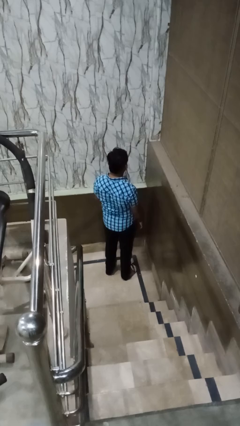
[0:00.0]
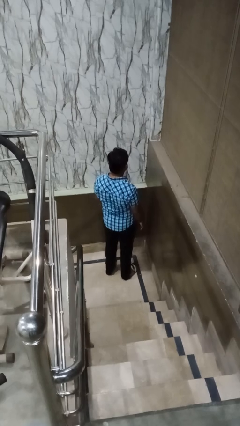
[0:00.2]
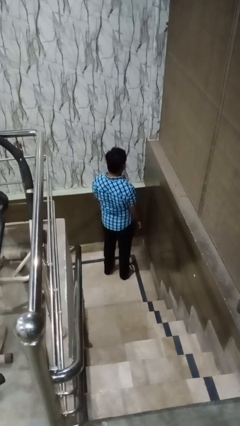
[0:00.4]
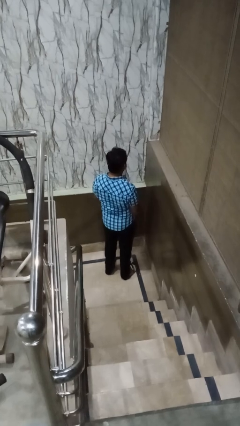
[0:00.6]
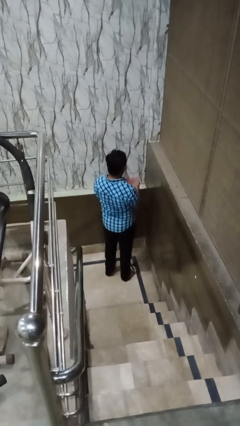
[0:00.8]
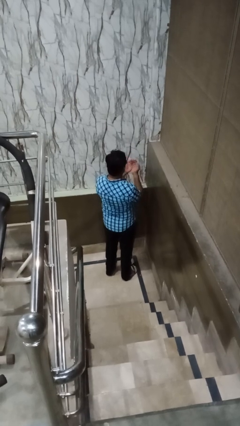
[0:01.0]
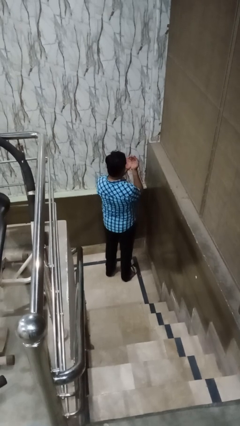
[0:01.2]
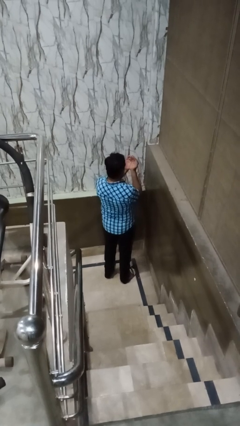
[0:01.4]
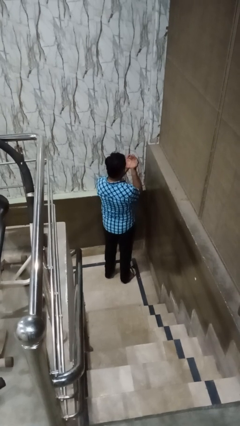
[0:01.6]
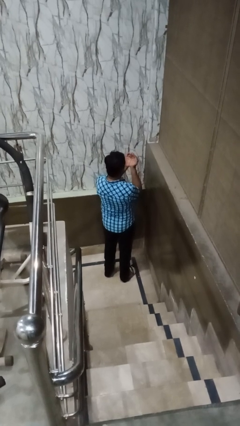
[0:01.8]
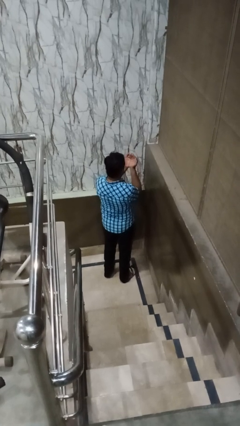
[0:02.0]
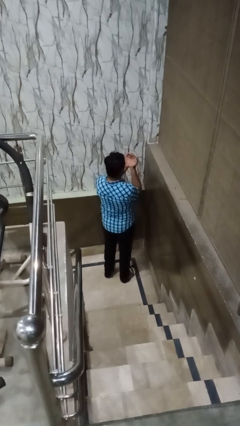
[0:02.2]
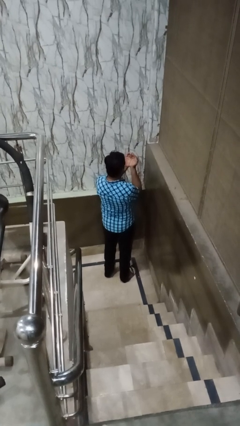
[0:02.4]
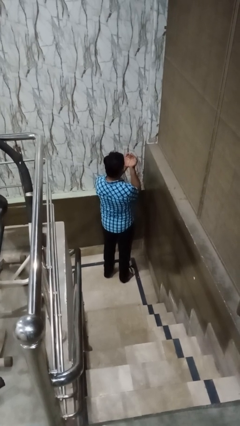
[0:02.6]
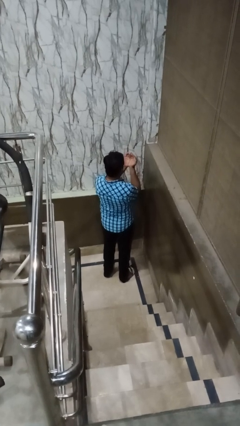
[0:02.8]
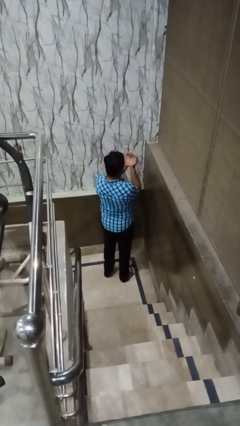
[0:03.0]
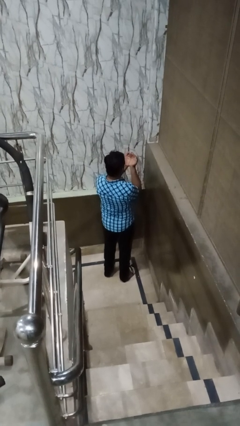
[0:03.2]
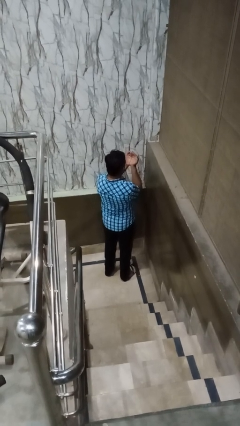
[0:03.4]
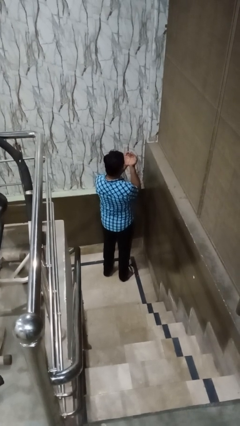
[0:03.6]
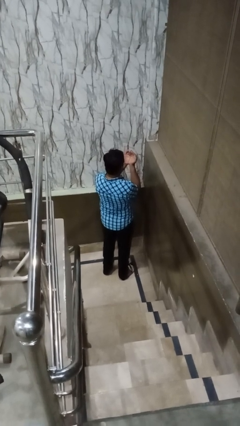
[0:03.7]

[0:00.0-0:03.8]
person prays

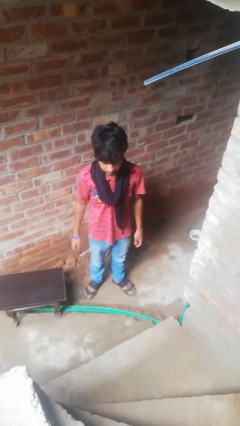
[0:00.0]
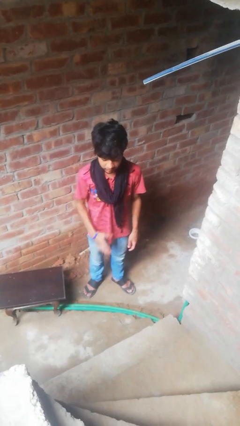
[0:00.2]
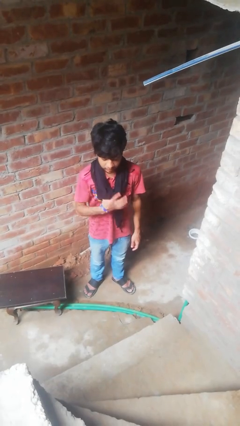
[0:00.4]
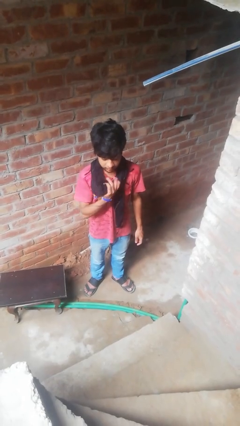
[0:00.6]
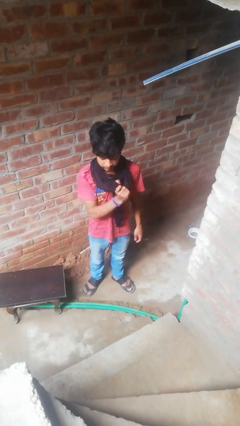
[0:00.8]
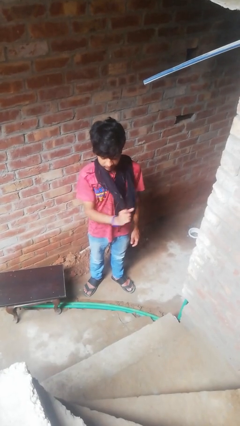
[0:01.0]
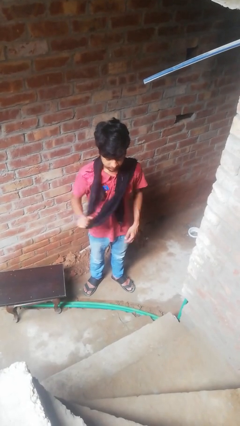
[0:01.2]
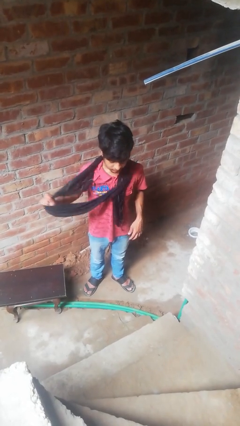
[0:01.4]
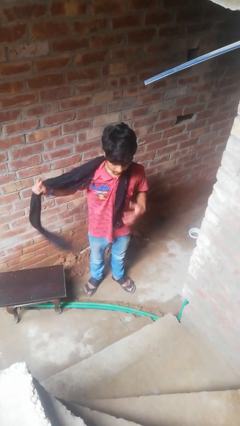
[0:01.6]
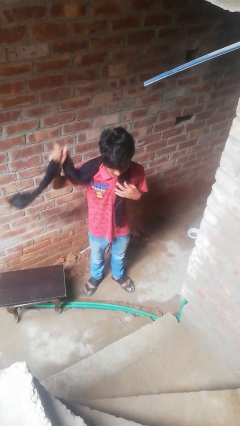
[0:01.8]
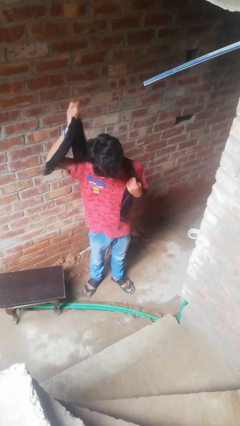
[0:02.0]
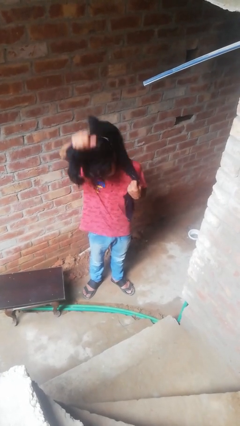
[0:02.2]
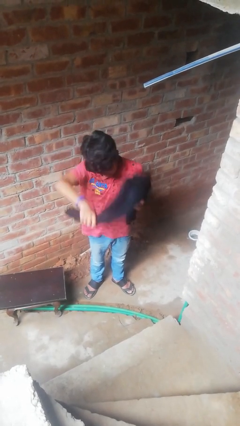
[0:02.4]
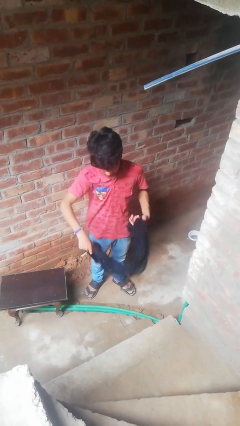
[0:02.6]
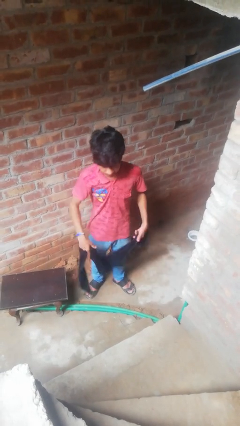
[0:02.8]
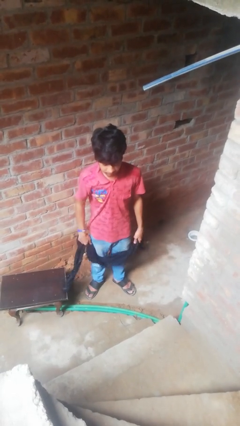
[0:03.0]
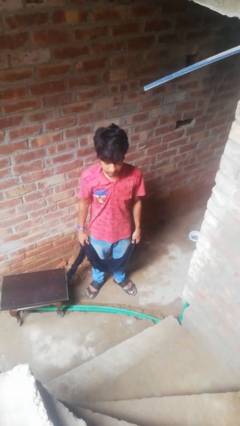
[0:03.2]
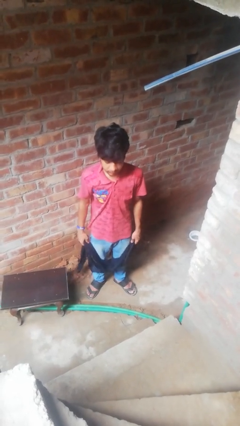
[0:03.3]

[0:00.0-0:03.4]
person takes off scarf

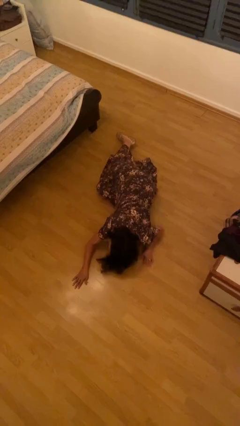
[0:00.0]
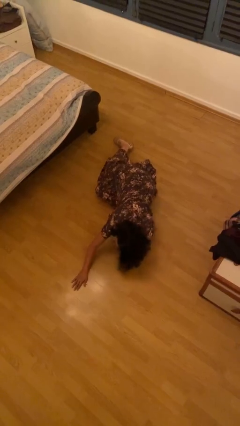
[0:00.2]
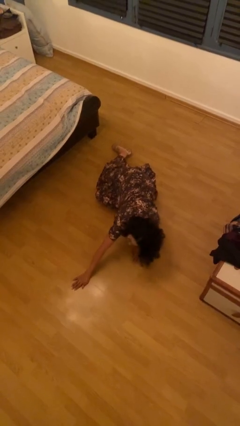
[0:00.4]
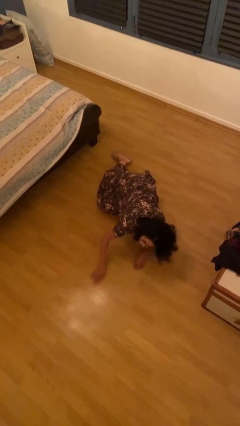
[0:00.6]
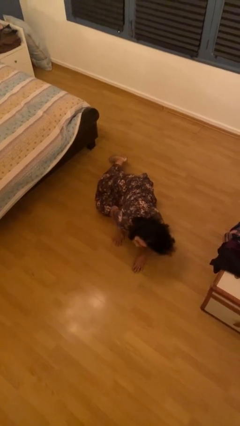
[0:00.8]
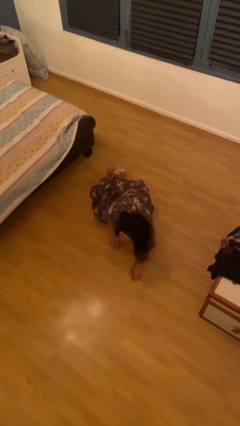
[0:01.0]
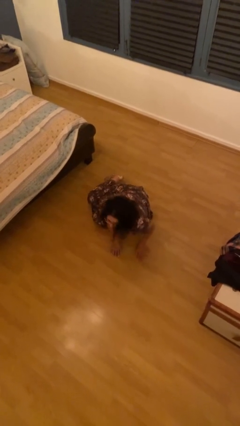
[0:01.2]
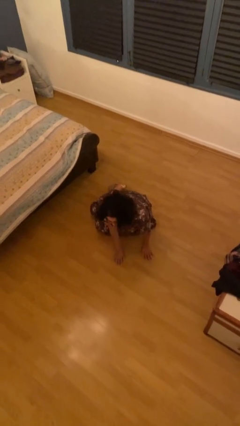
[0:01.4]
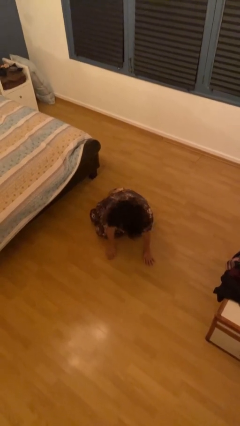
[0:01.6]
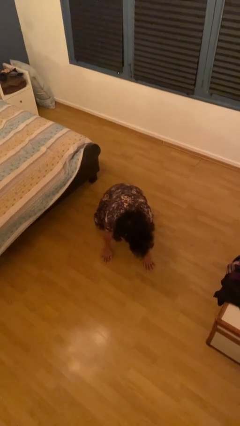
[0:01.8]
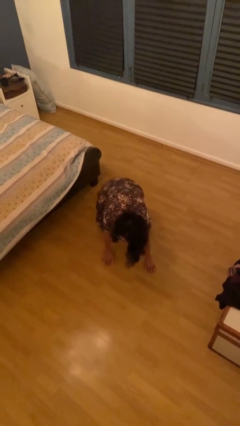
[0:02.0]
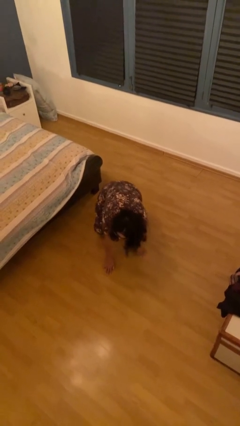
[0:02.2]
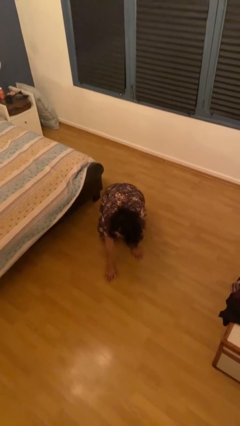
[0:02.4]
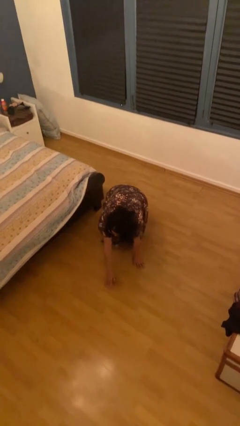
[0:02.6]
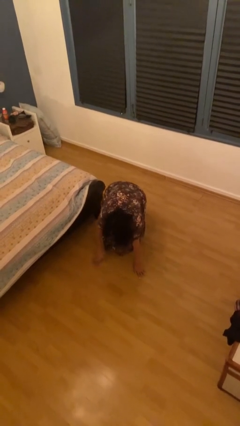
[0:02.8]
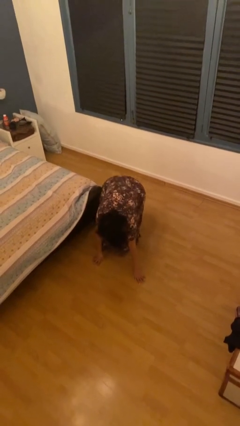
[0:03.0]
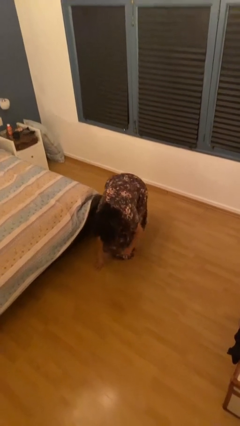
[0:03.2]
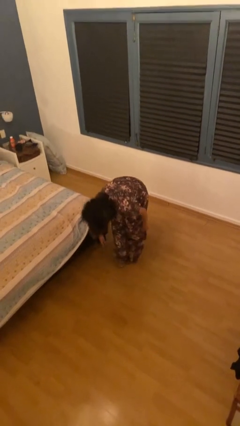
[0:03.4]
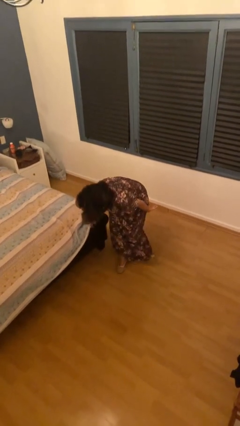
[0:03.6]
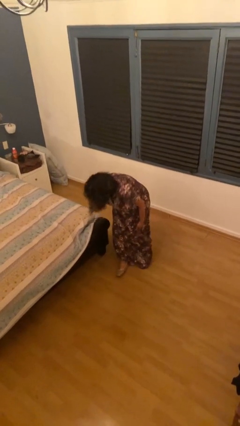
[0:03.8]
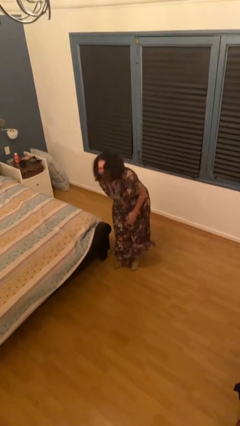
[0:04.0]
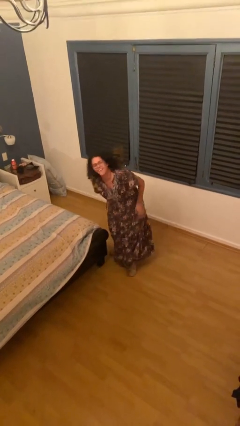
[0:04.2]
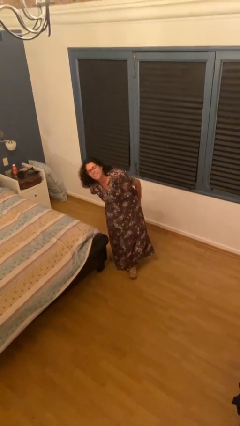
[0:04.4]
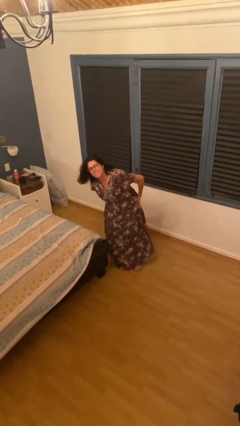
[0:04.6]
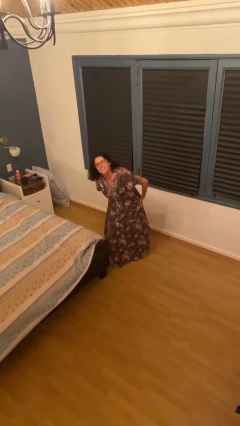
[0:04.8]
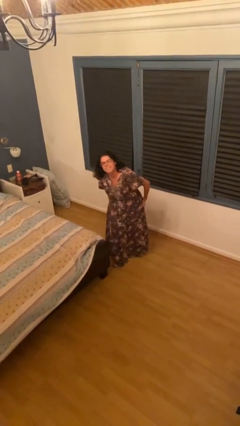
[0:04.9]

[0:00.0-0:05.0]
person stands up from floor

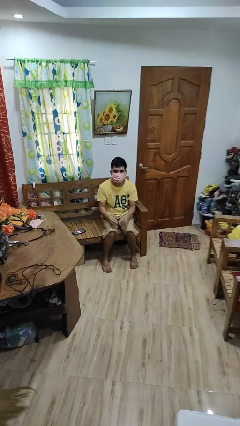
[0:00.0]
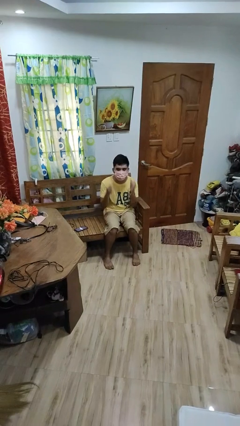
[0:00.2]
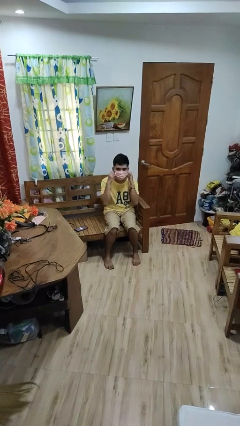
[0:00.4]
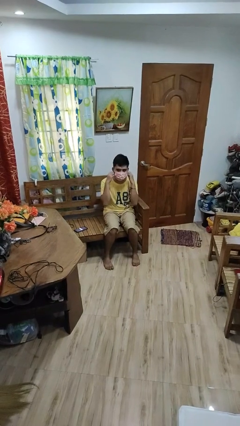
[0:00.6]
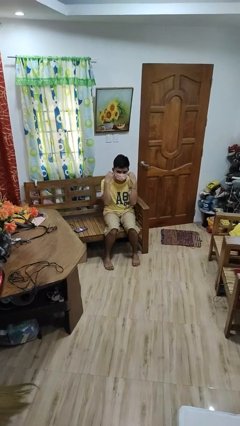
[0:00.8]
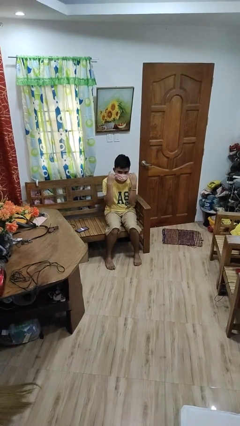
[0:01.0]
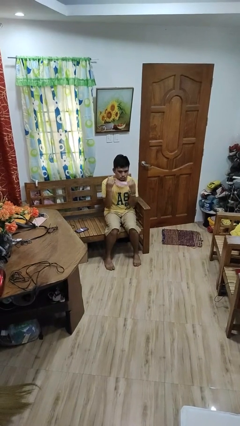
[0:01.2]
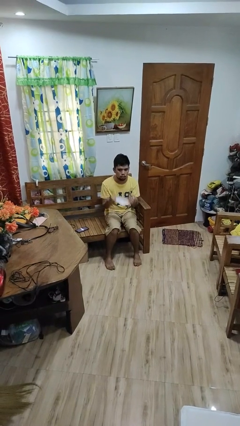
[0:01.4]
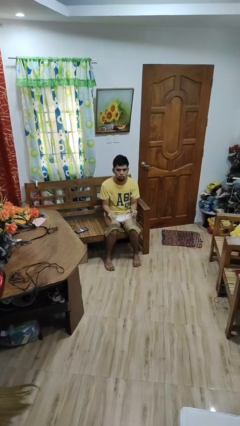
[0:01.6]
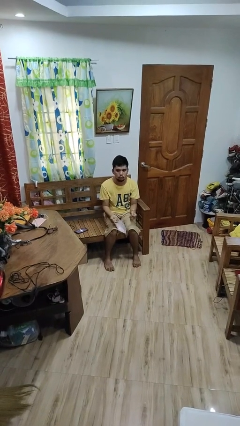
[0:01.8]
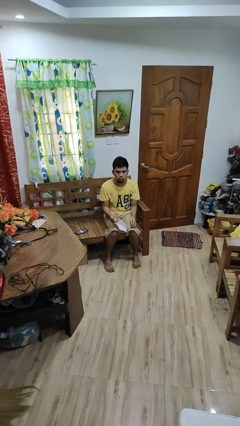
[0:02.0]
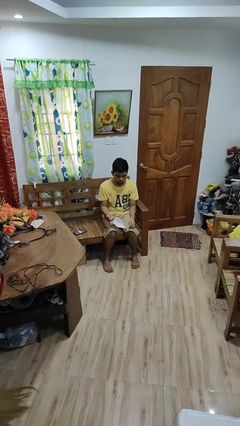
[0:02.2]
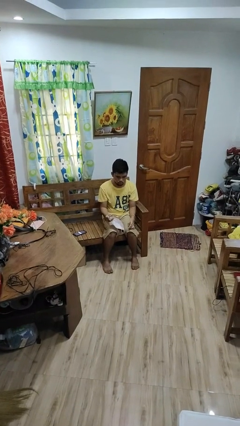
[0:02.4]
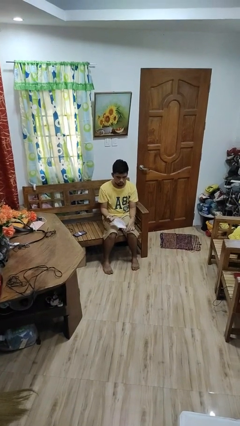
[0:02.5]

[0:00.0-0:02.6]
person takes off facemask

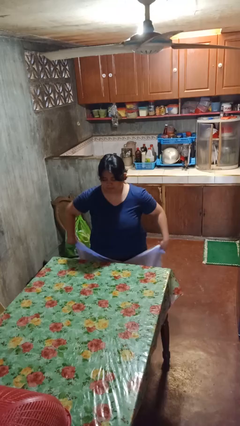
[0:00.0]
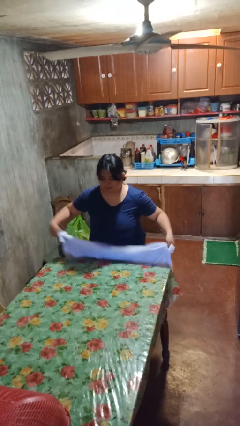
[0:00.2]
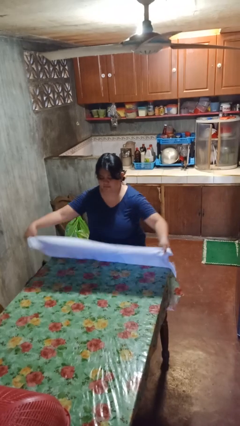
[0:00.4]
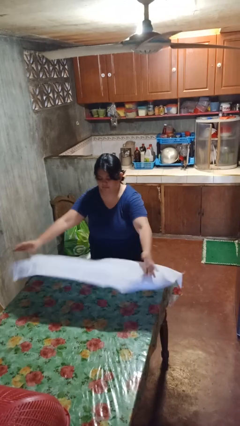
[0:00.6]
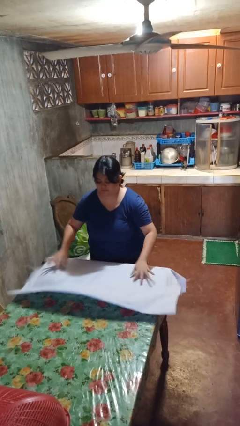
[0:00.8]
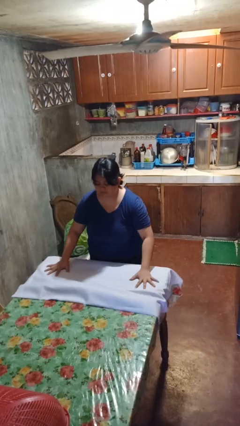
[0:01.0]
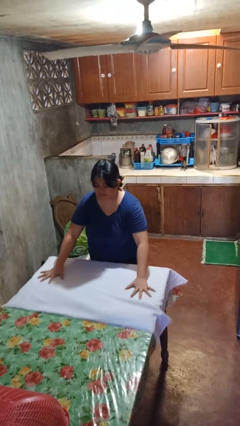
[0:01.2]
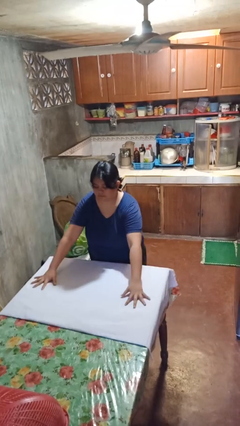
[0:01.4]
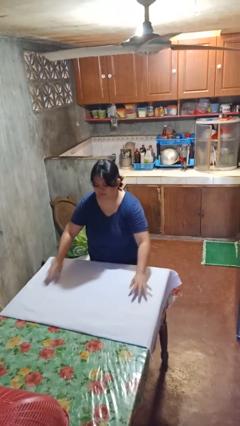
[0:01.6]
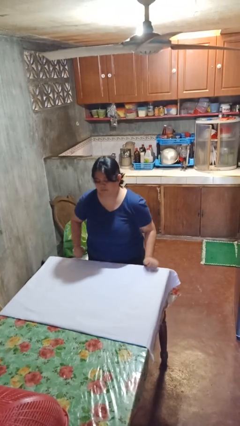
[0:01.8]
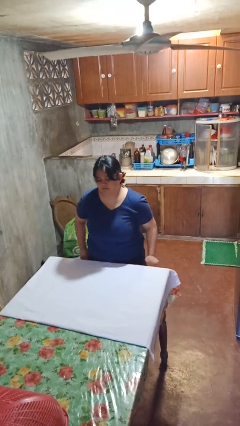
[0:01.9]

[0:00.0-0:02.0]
person spreads tablecloth

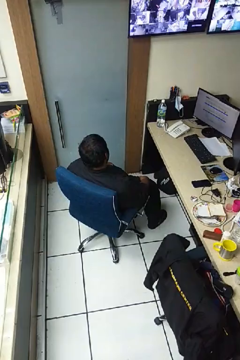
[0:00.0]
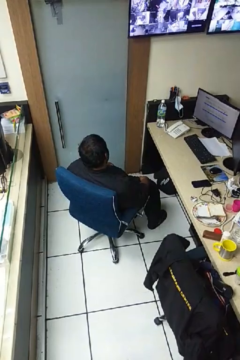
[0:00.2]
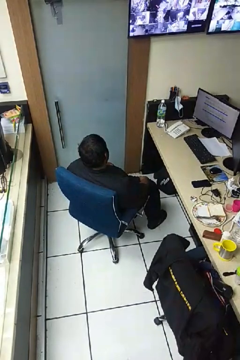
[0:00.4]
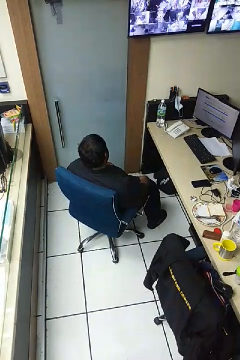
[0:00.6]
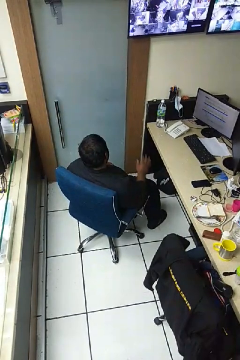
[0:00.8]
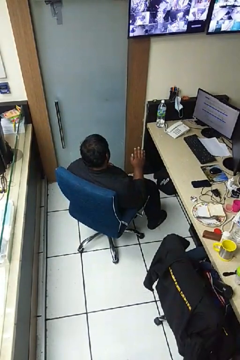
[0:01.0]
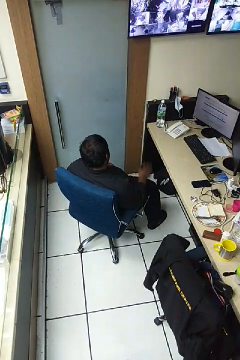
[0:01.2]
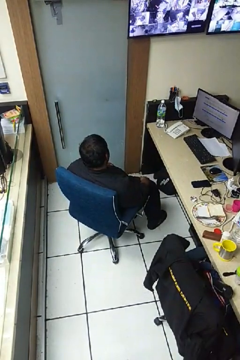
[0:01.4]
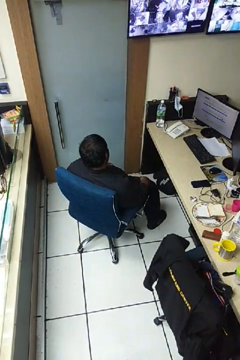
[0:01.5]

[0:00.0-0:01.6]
person slaps hands on thighs
